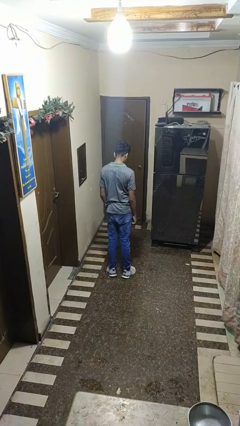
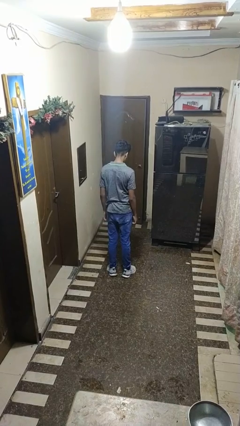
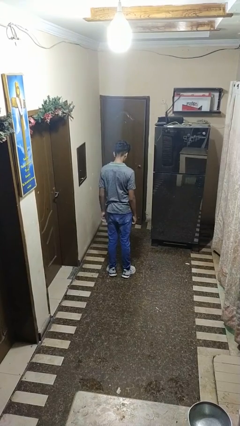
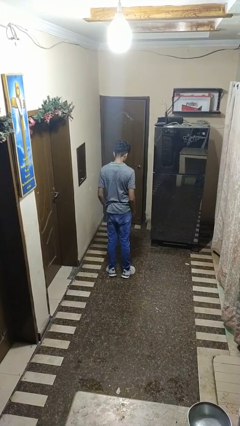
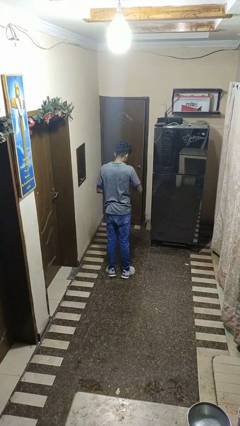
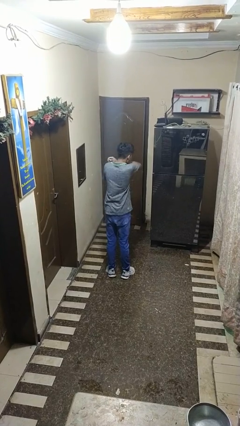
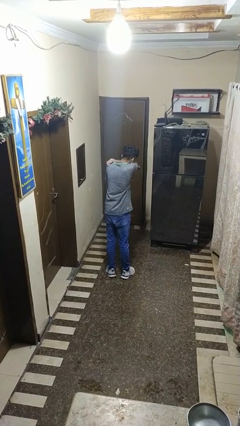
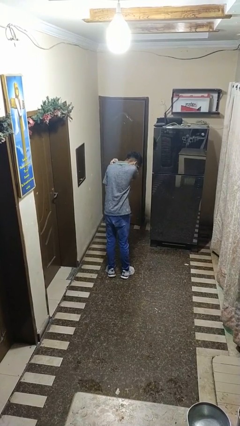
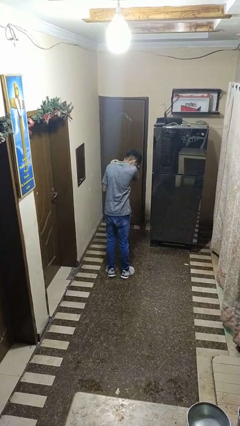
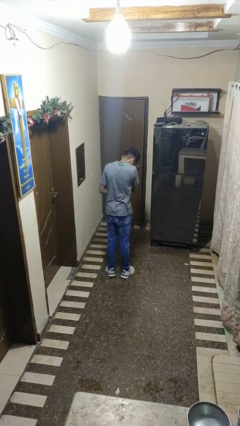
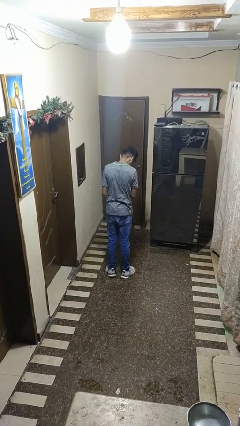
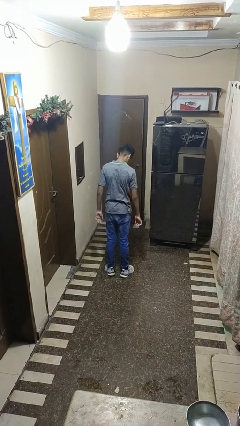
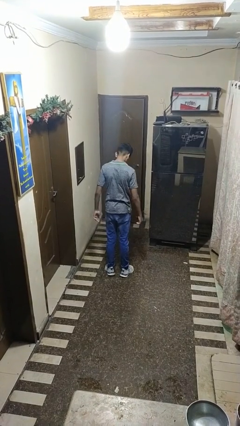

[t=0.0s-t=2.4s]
person sneezes into arm

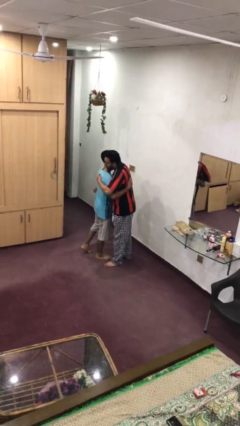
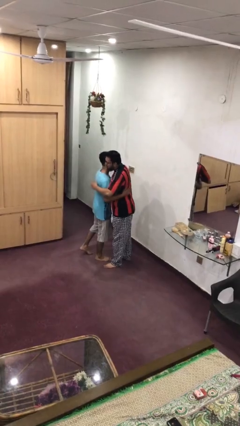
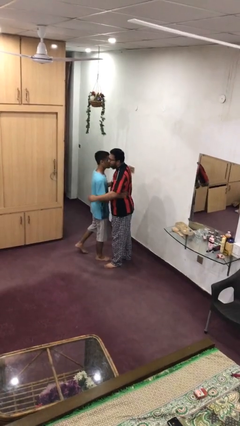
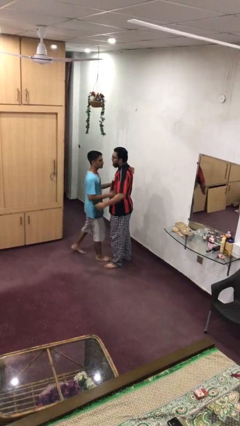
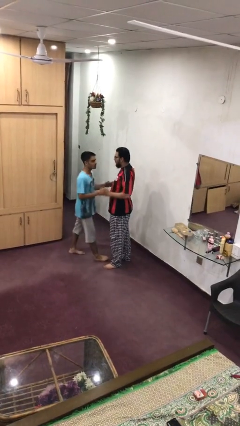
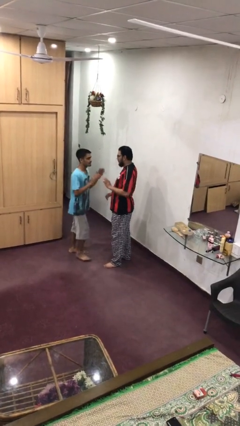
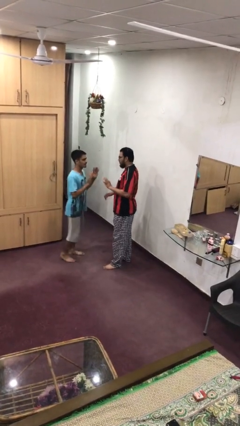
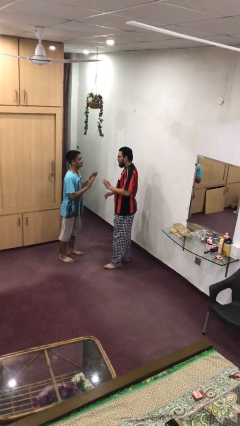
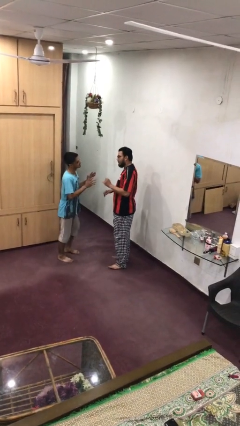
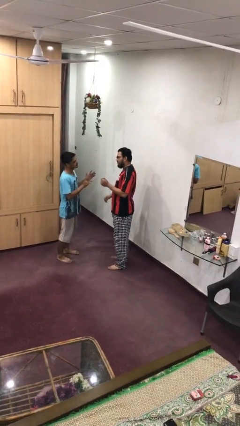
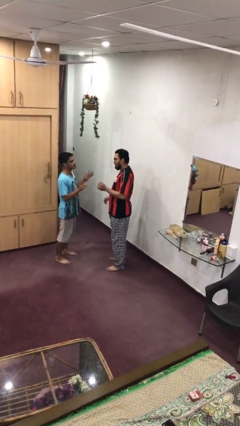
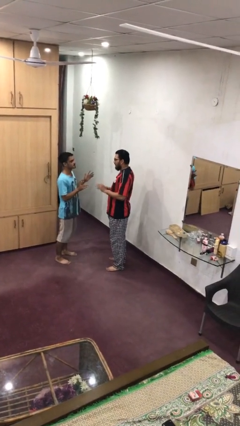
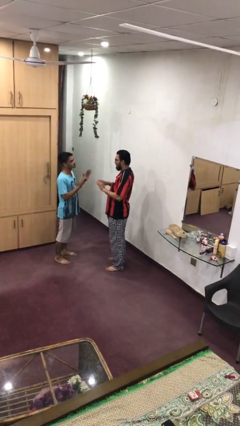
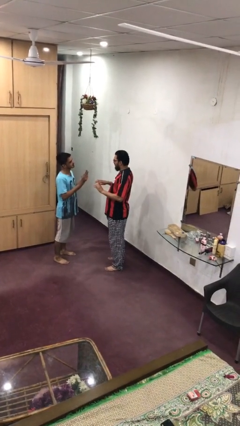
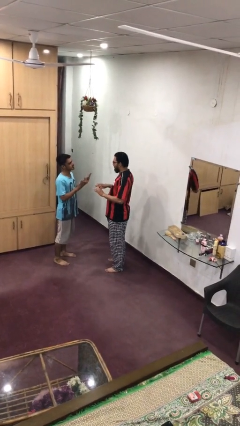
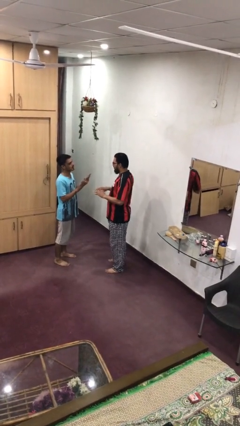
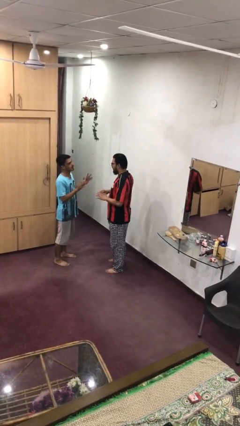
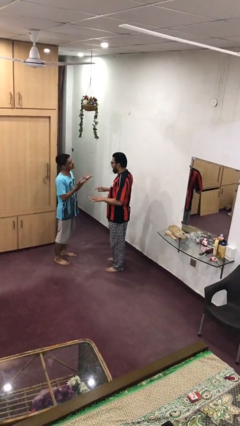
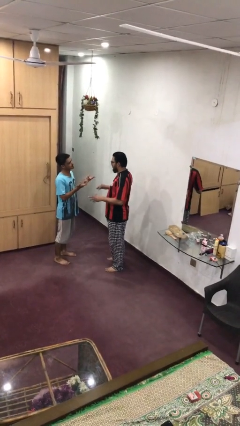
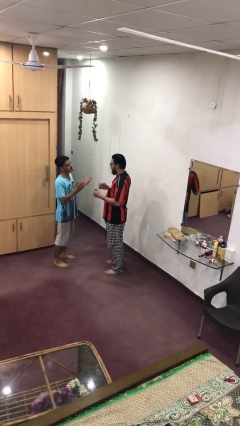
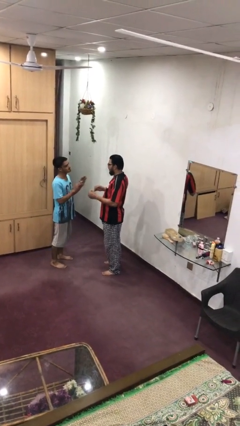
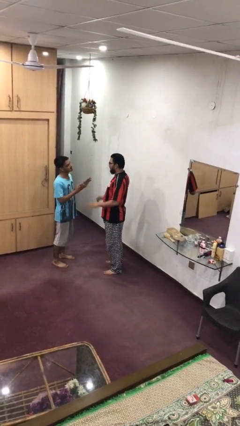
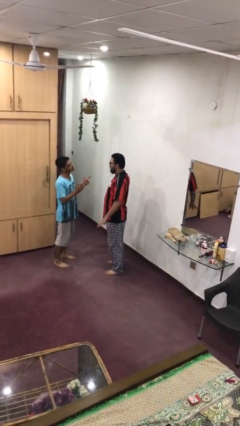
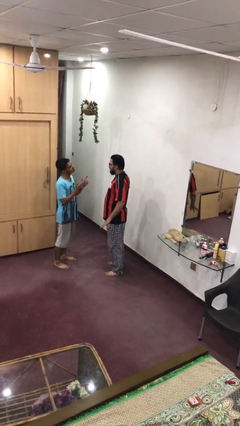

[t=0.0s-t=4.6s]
person talks to person

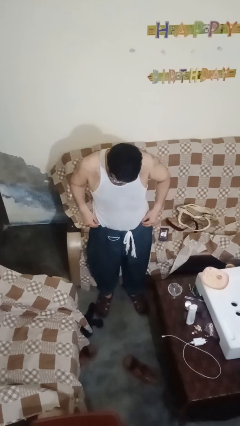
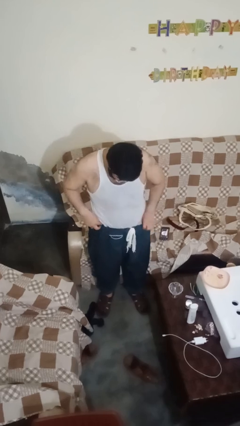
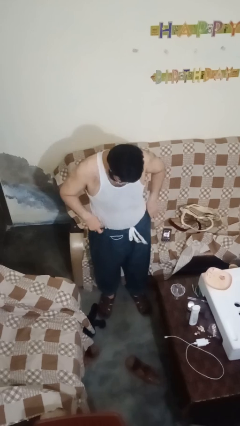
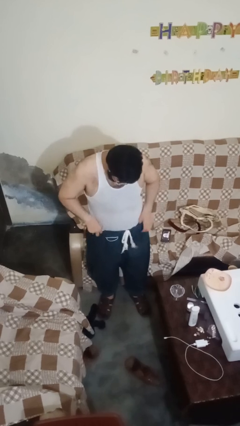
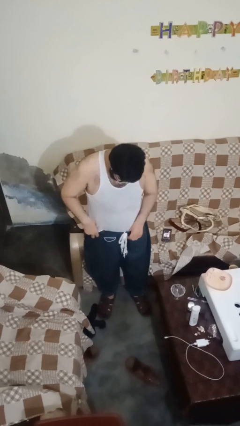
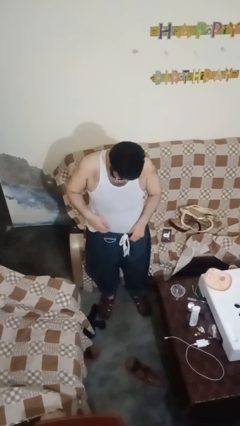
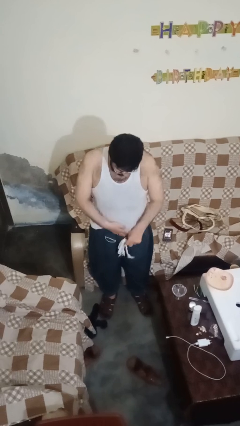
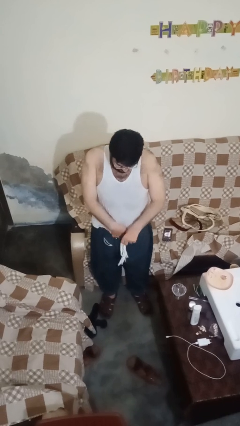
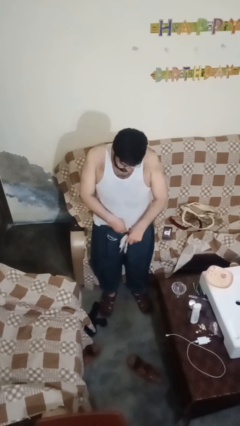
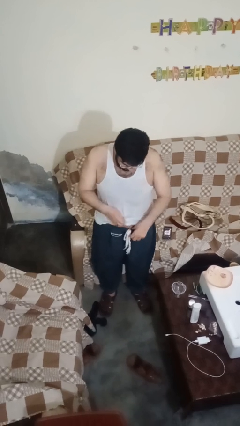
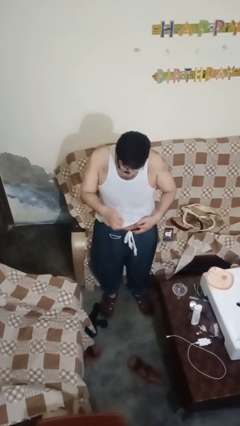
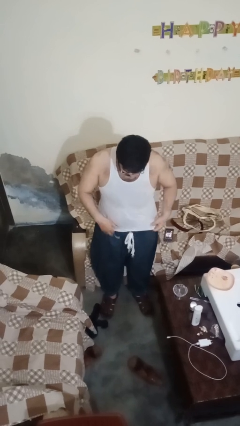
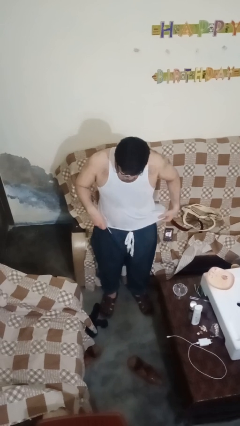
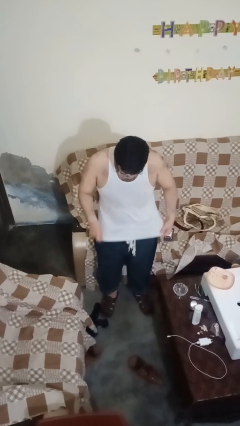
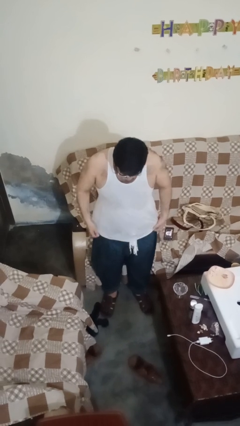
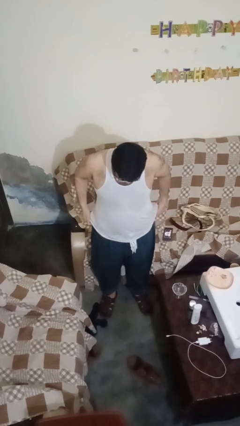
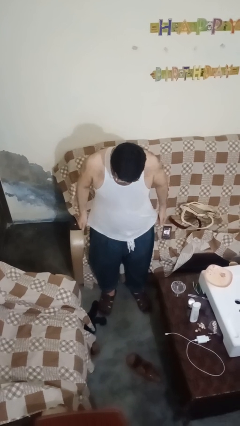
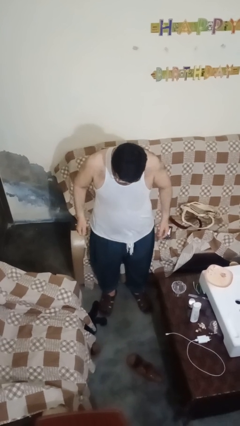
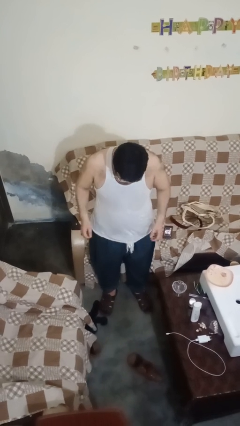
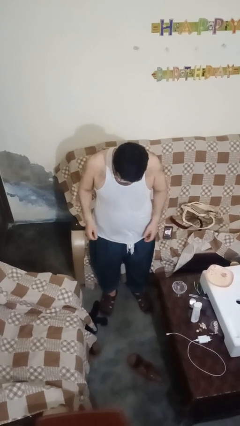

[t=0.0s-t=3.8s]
person untucks shirt

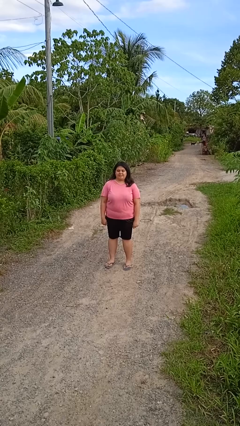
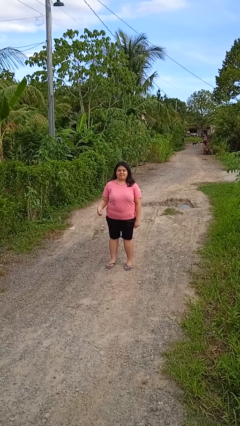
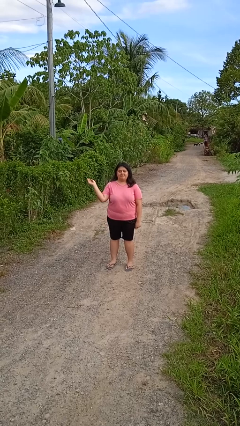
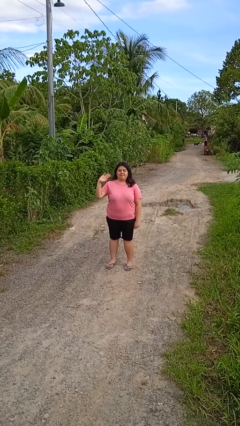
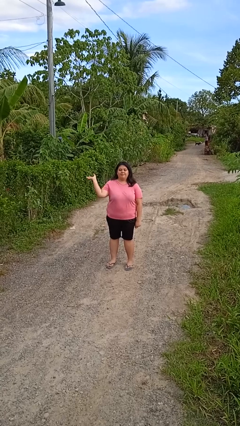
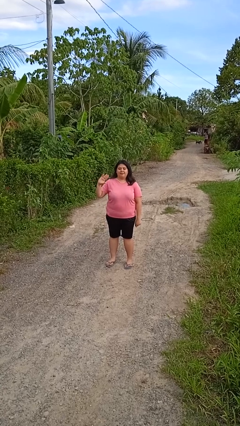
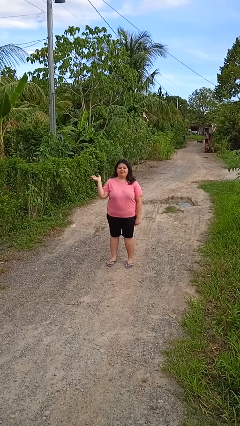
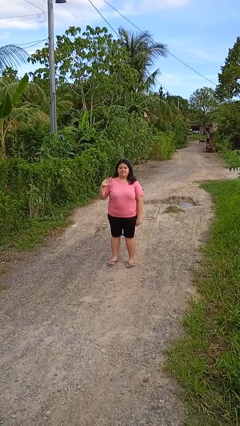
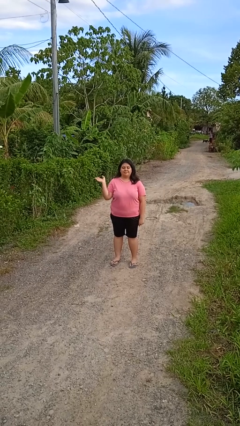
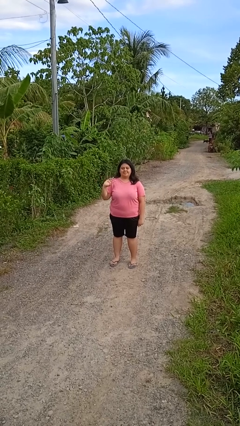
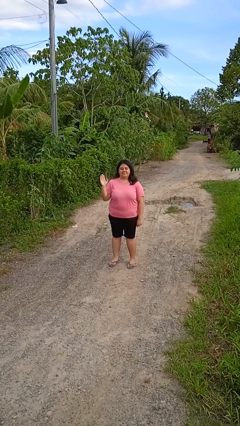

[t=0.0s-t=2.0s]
person waves at person

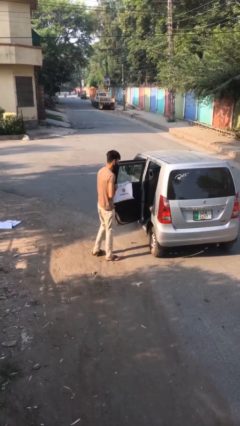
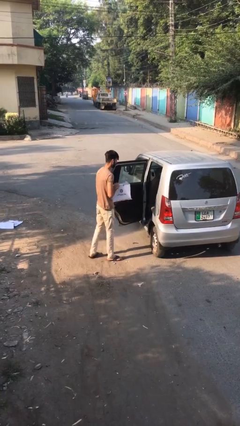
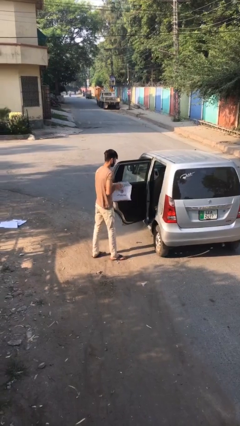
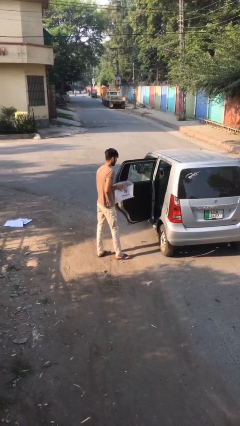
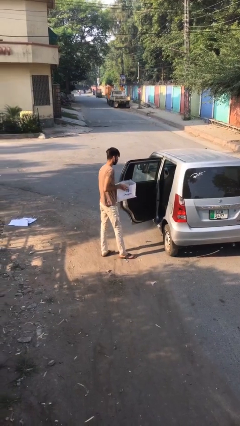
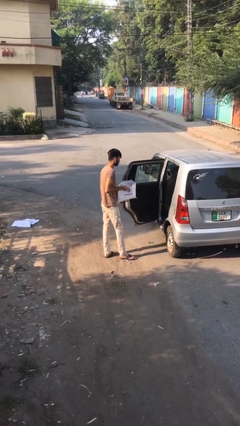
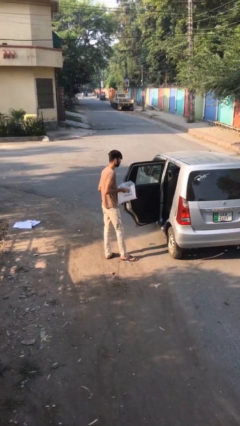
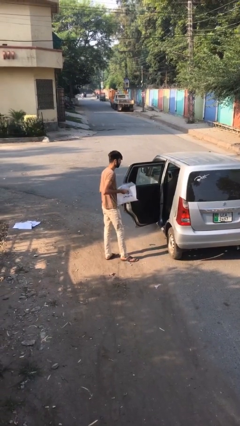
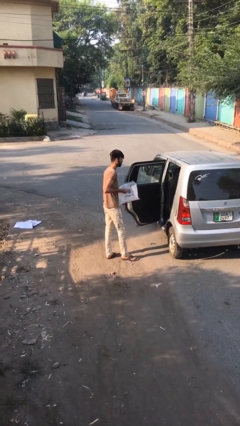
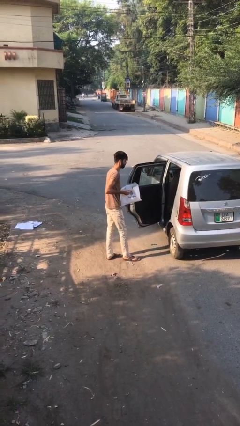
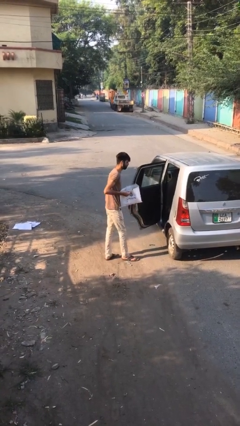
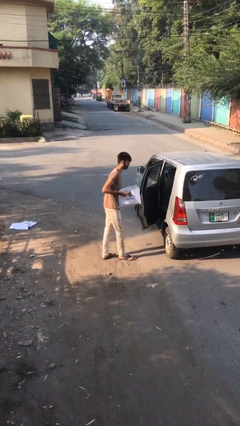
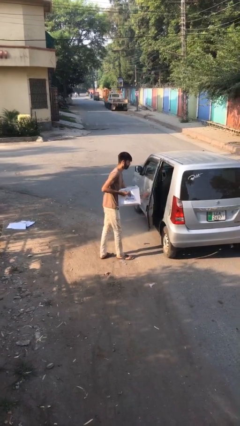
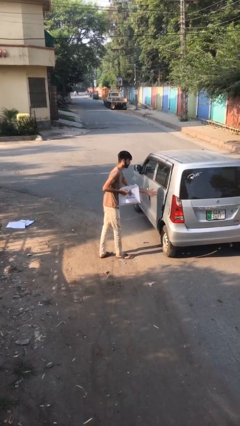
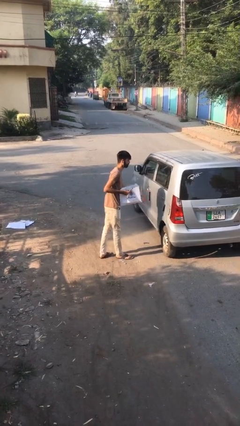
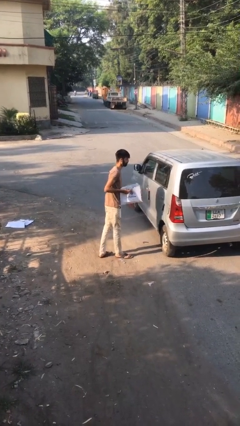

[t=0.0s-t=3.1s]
person closes car door

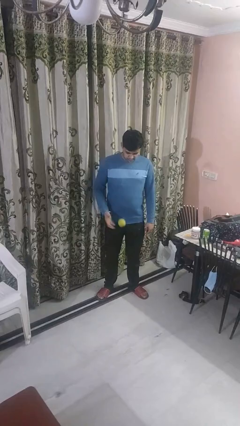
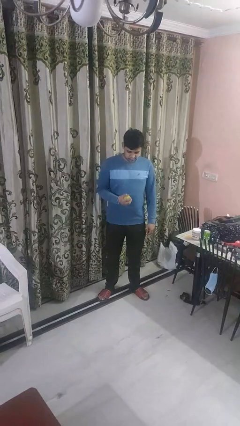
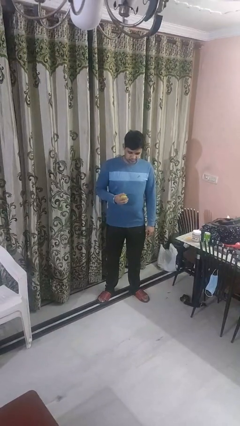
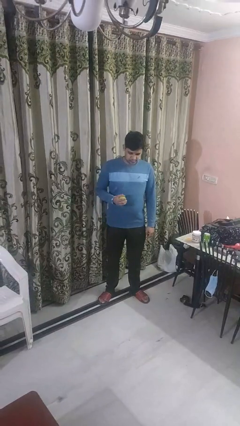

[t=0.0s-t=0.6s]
person bounces ball on floor

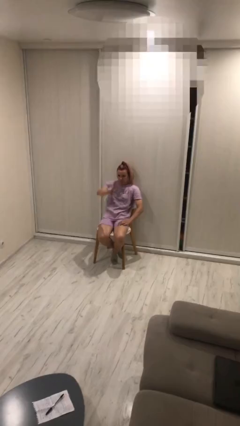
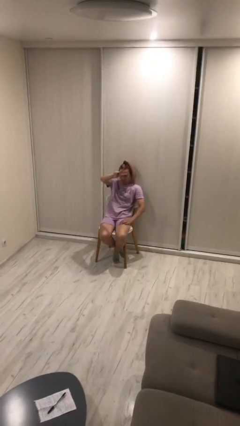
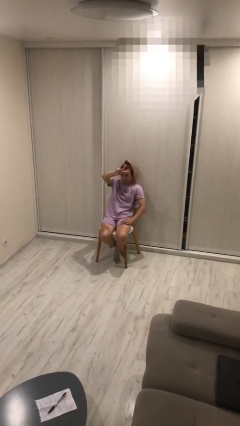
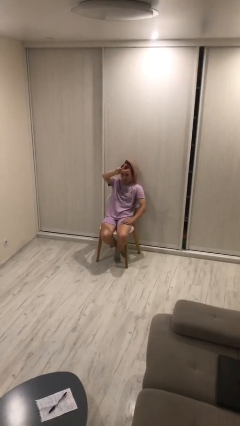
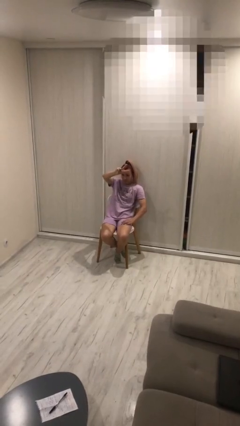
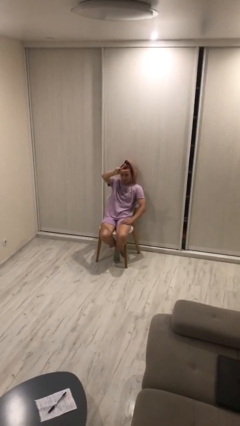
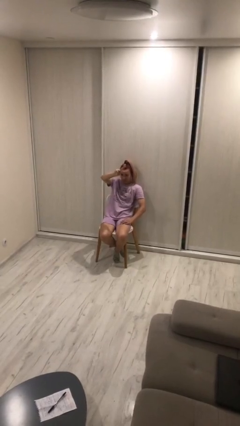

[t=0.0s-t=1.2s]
person gestures peace
